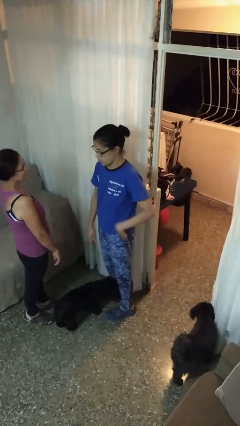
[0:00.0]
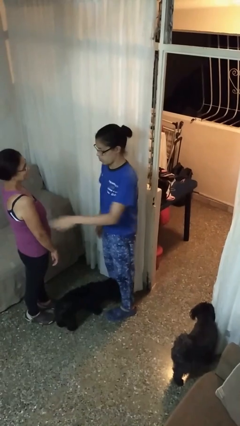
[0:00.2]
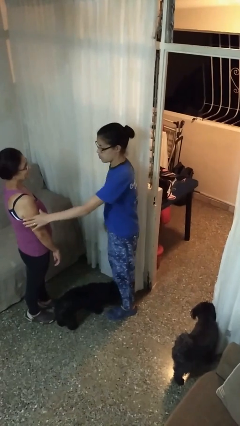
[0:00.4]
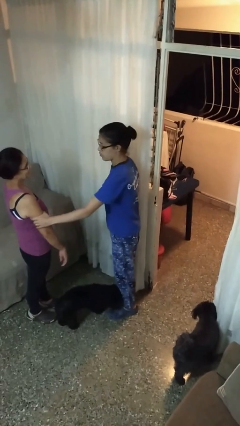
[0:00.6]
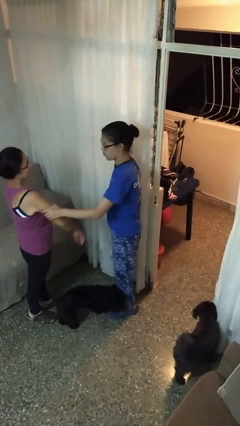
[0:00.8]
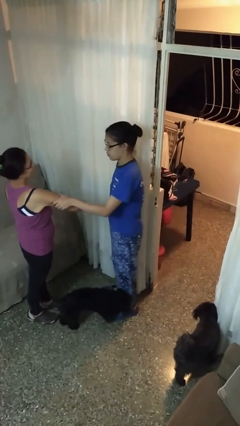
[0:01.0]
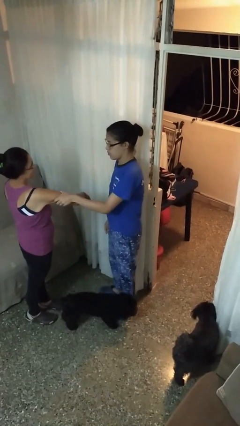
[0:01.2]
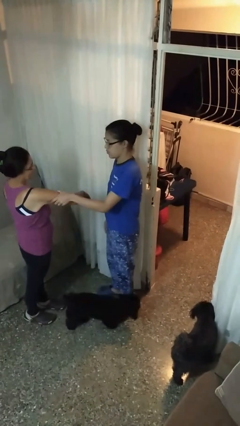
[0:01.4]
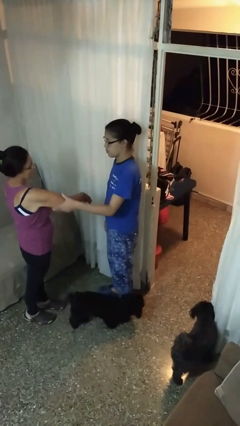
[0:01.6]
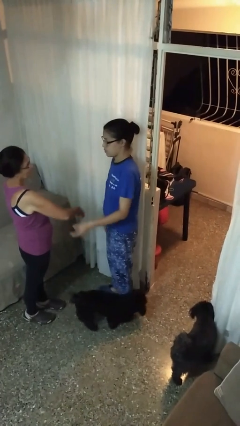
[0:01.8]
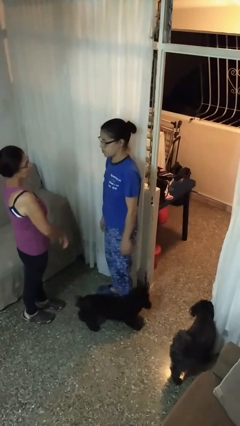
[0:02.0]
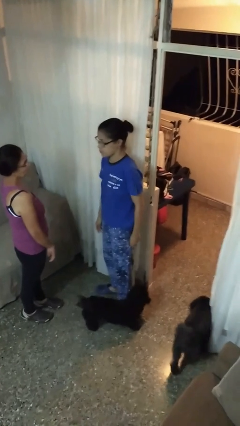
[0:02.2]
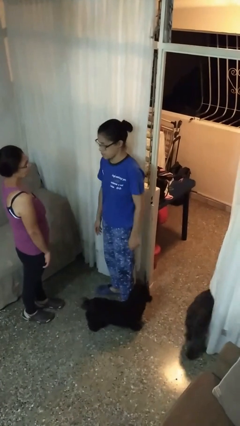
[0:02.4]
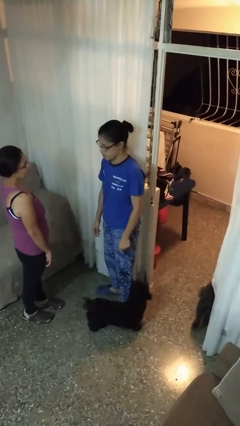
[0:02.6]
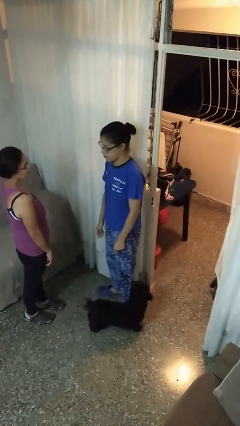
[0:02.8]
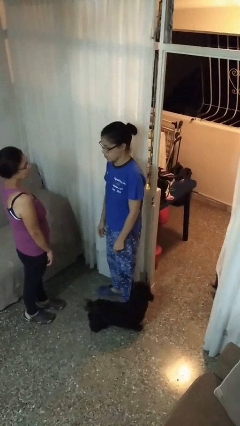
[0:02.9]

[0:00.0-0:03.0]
person grabs person by bicep

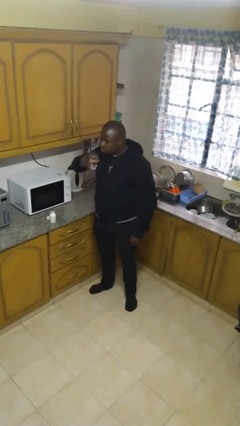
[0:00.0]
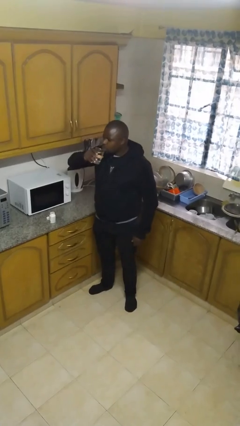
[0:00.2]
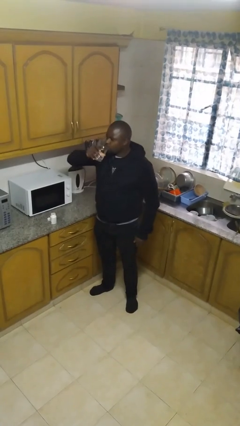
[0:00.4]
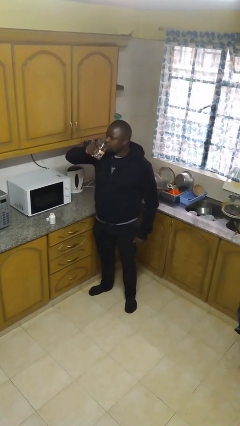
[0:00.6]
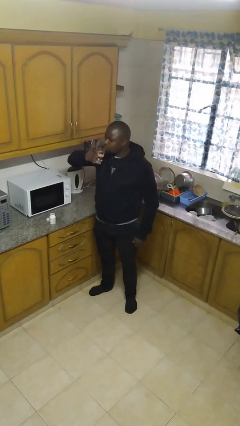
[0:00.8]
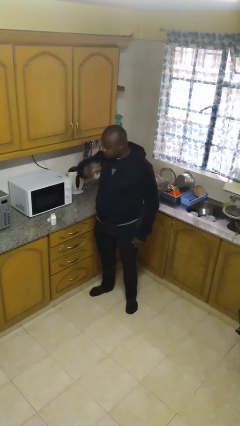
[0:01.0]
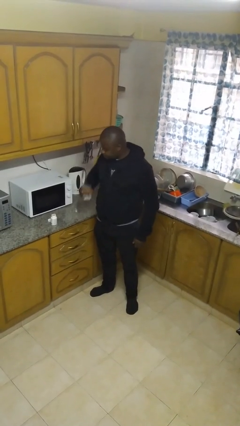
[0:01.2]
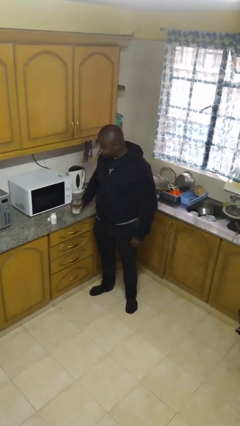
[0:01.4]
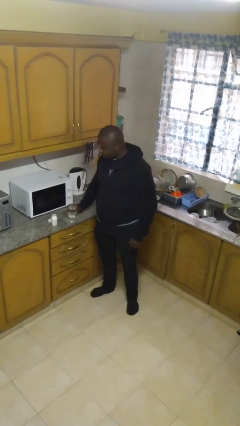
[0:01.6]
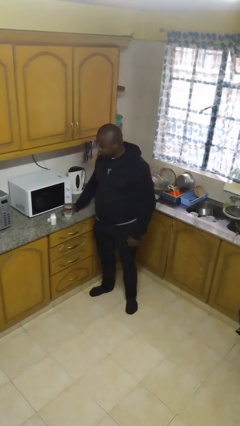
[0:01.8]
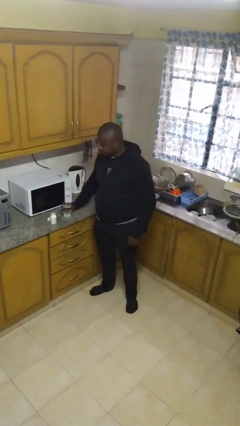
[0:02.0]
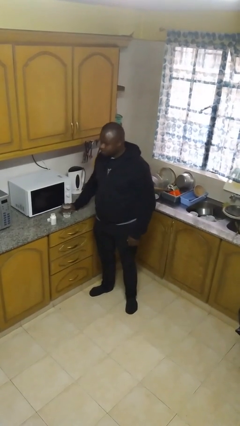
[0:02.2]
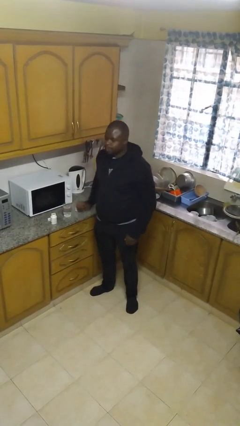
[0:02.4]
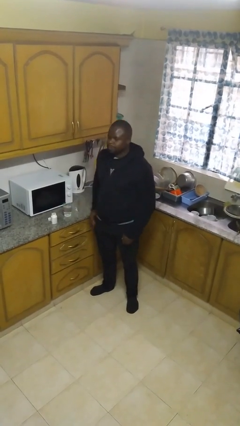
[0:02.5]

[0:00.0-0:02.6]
person drinks from cup

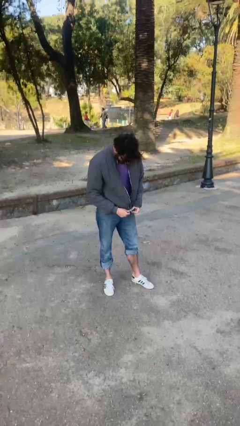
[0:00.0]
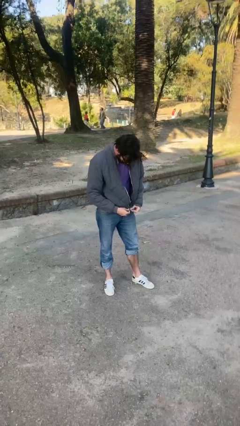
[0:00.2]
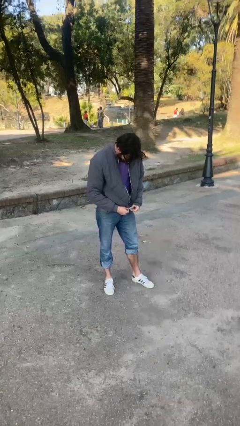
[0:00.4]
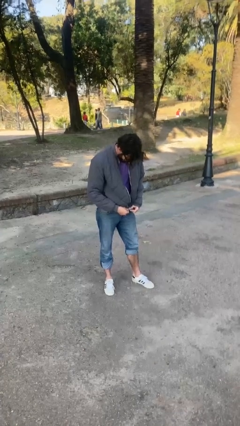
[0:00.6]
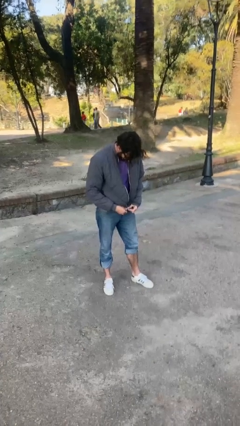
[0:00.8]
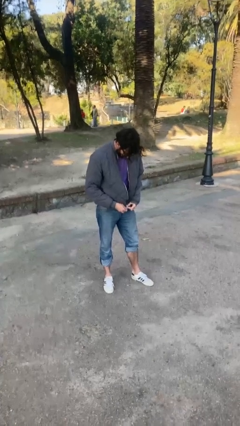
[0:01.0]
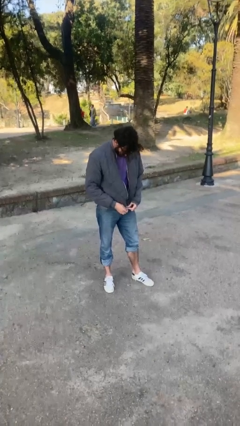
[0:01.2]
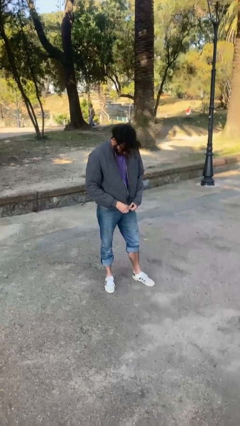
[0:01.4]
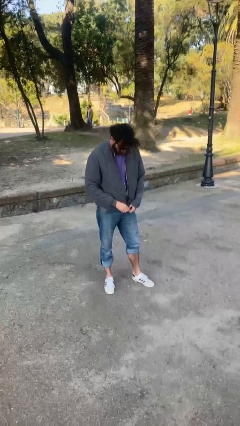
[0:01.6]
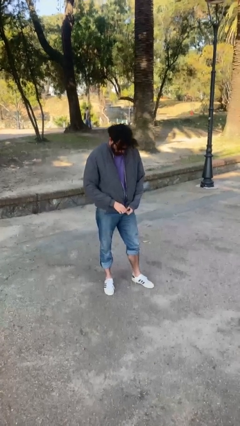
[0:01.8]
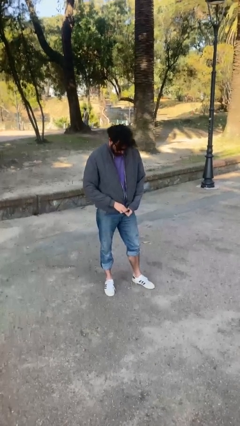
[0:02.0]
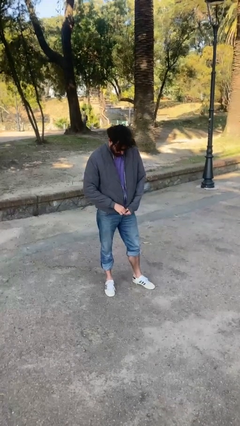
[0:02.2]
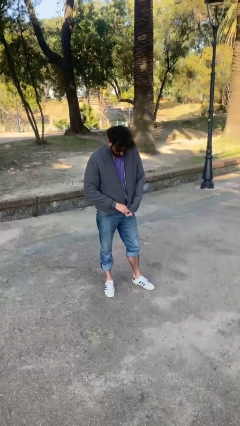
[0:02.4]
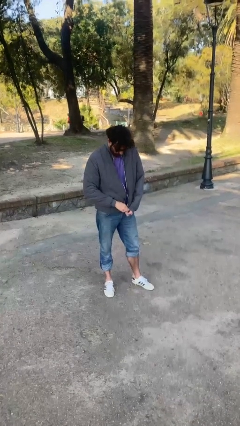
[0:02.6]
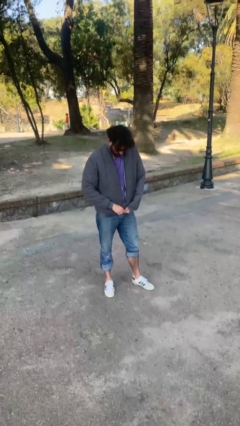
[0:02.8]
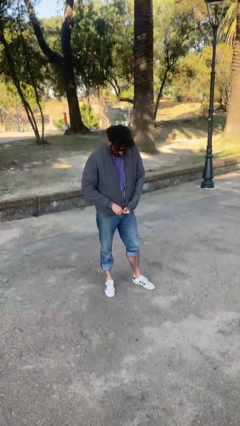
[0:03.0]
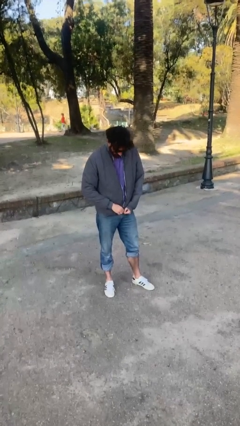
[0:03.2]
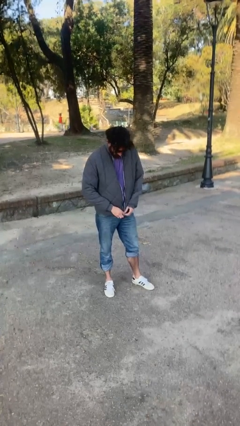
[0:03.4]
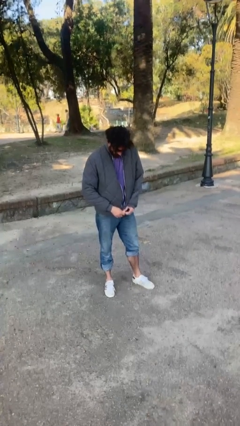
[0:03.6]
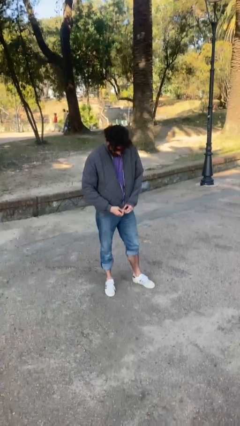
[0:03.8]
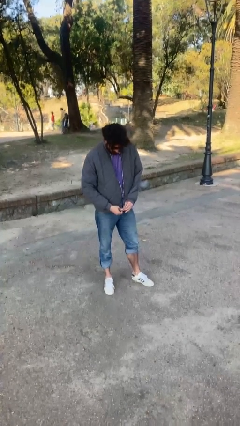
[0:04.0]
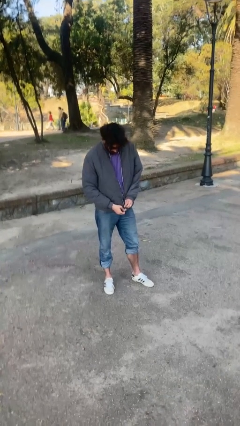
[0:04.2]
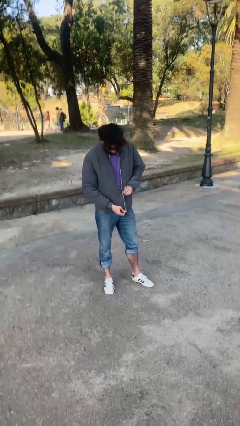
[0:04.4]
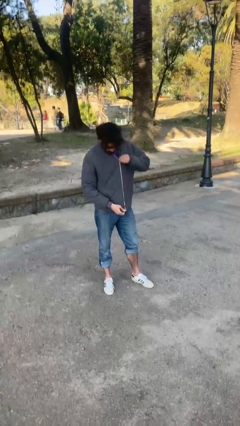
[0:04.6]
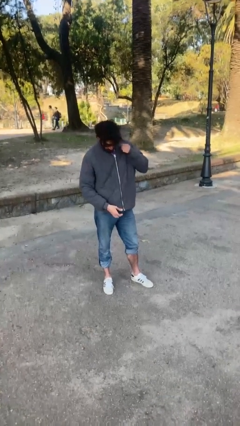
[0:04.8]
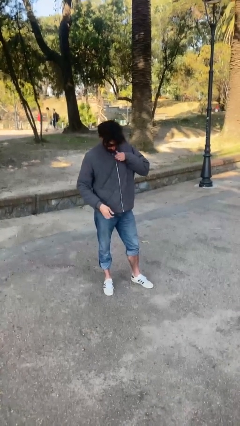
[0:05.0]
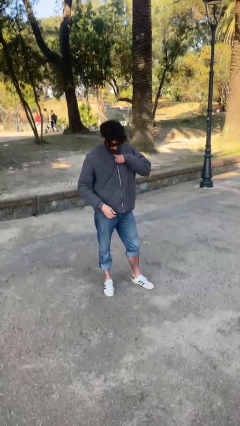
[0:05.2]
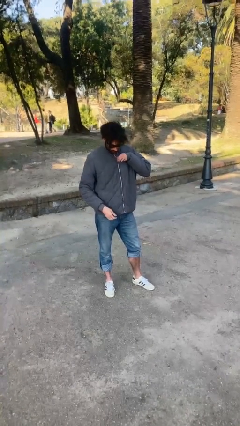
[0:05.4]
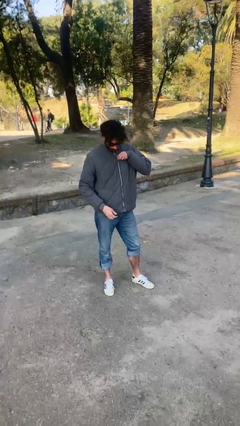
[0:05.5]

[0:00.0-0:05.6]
person zips up jacket

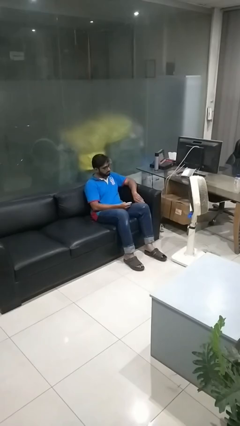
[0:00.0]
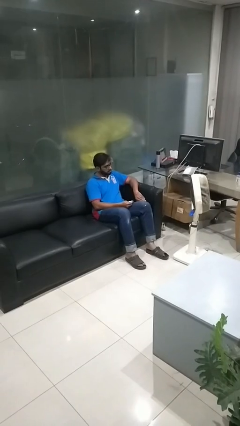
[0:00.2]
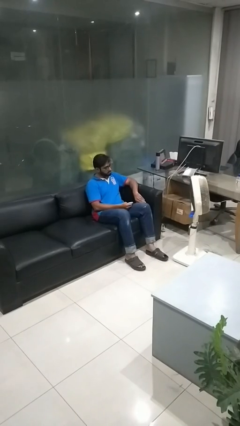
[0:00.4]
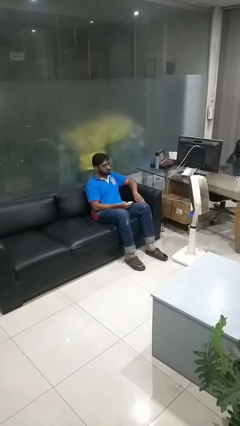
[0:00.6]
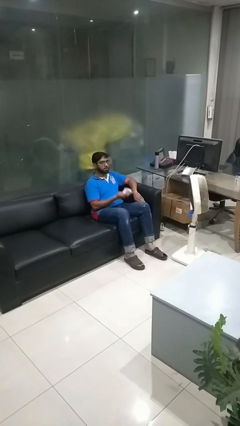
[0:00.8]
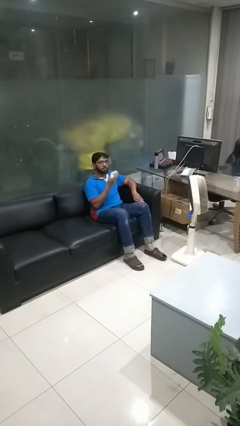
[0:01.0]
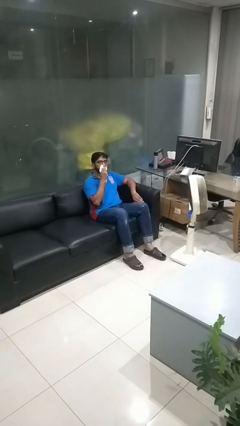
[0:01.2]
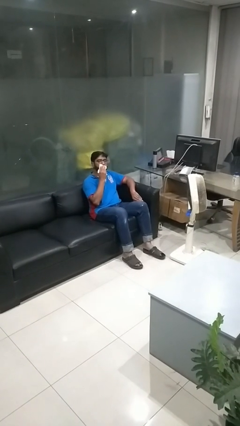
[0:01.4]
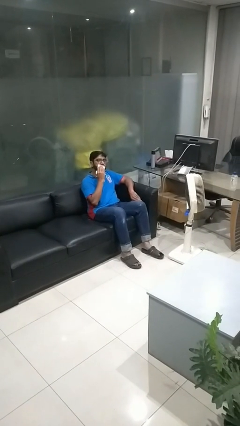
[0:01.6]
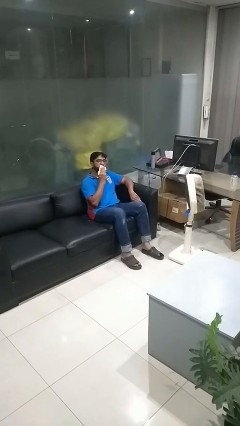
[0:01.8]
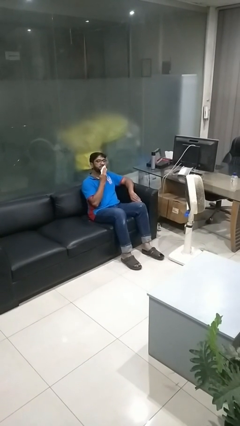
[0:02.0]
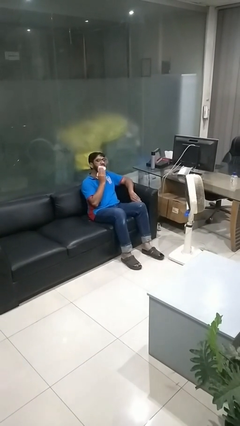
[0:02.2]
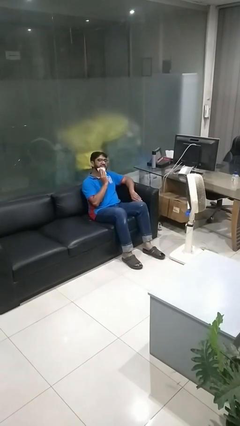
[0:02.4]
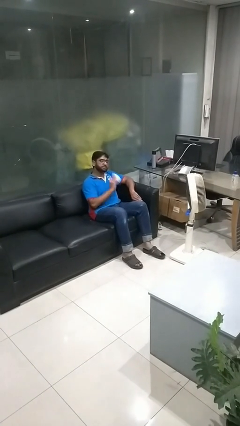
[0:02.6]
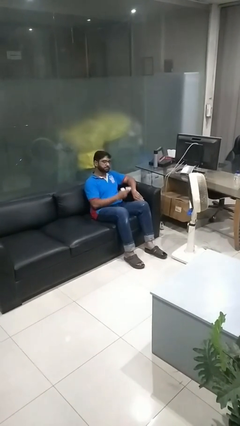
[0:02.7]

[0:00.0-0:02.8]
person wipes mouth with napkin

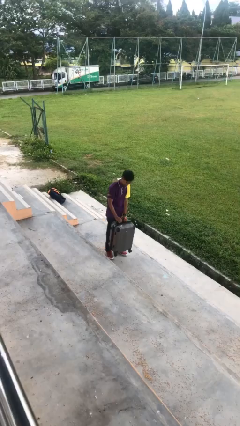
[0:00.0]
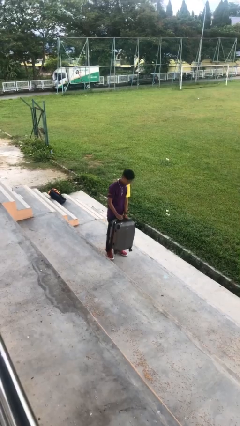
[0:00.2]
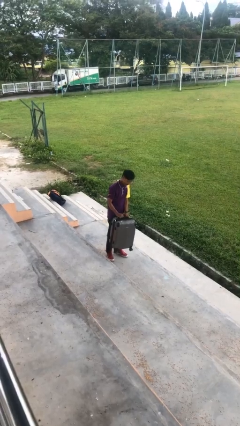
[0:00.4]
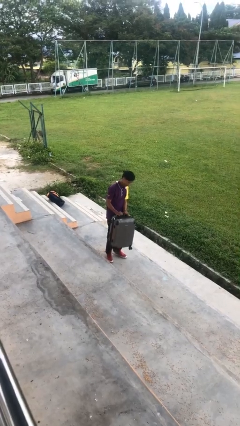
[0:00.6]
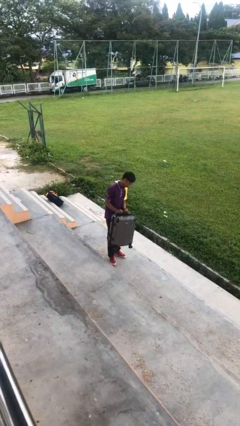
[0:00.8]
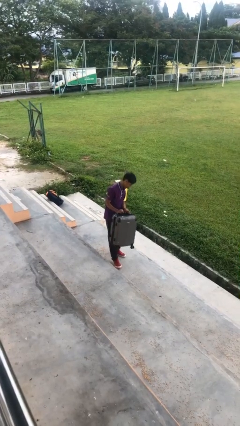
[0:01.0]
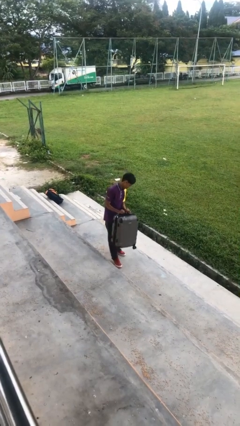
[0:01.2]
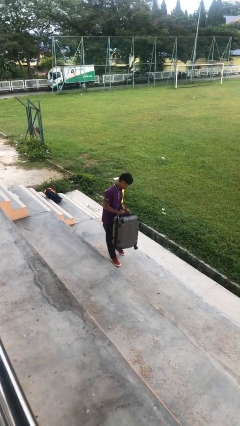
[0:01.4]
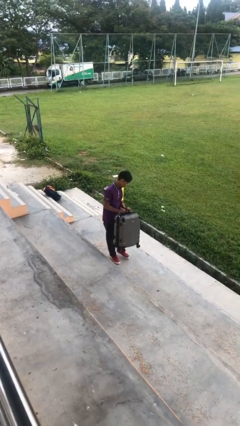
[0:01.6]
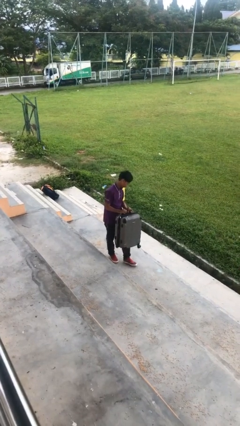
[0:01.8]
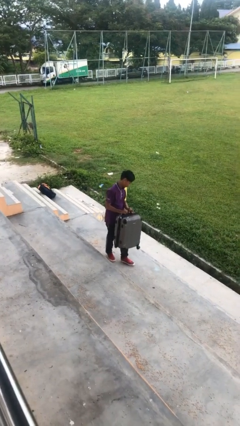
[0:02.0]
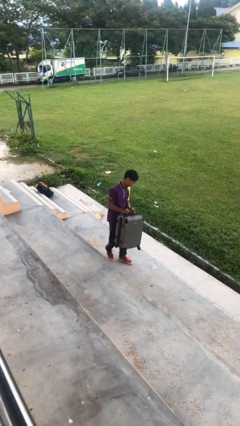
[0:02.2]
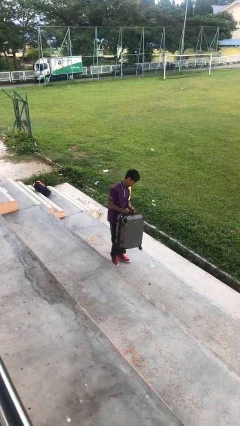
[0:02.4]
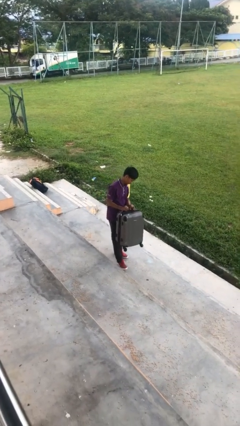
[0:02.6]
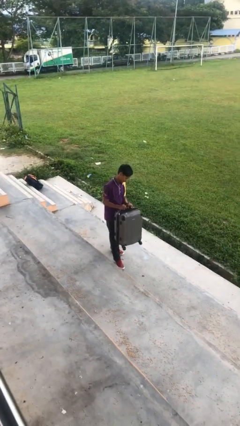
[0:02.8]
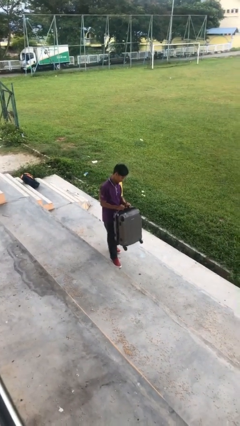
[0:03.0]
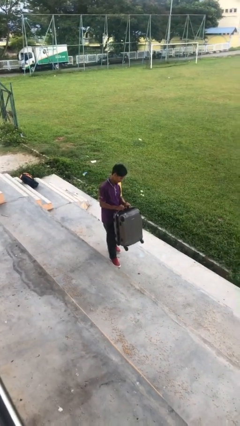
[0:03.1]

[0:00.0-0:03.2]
person carries heavy object

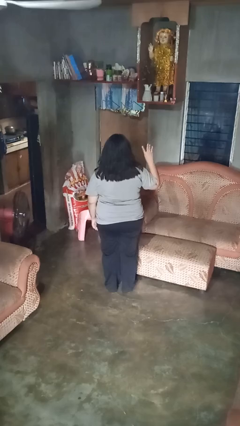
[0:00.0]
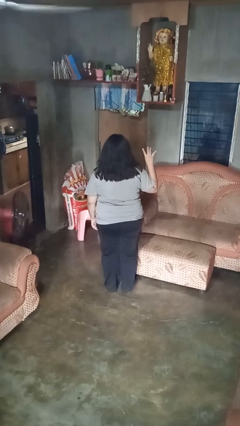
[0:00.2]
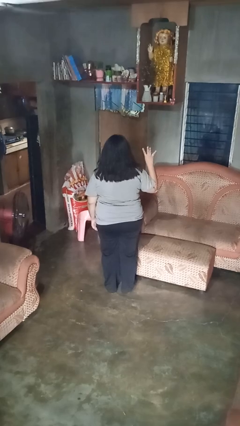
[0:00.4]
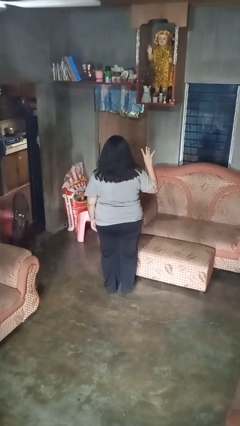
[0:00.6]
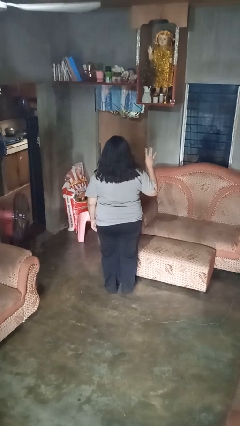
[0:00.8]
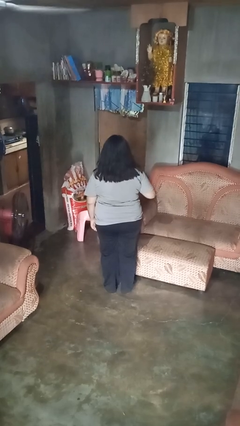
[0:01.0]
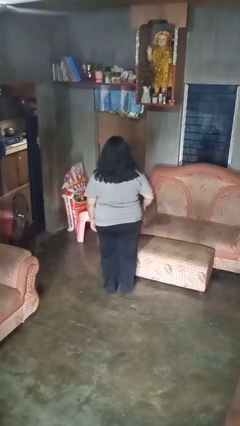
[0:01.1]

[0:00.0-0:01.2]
person gestures number four
